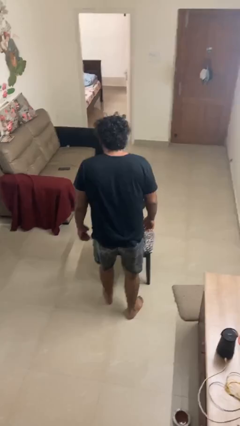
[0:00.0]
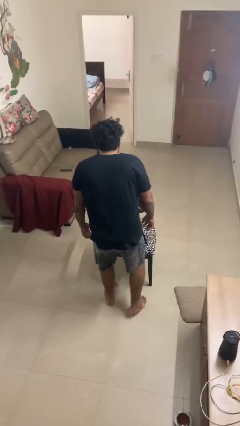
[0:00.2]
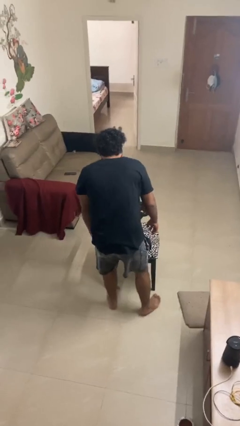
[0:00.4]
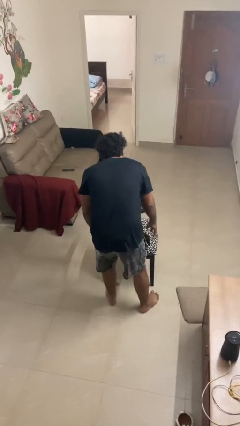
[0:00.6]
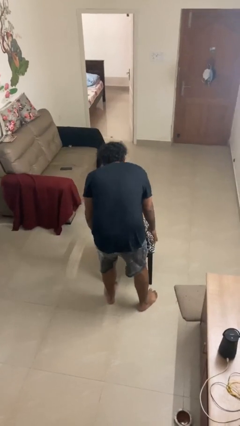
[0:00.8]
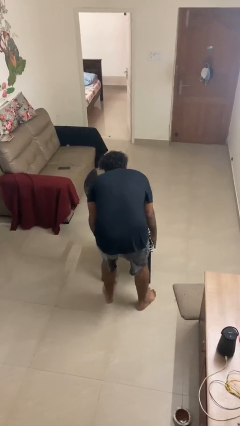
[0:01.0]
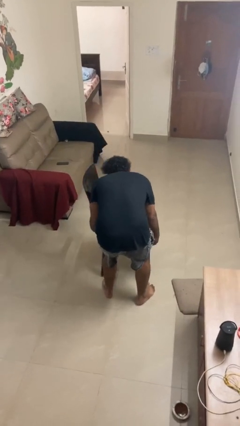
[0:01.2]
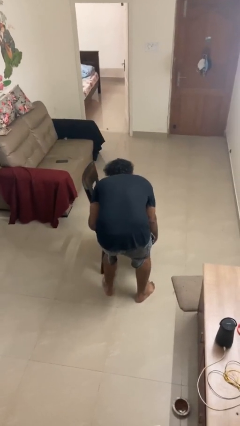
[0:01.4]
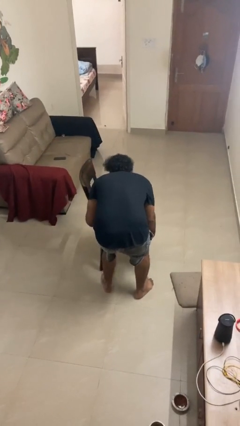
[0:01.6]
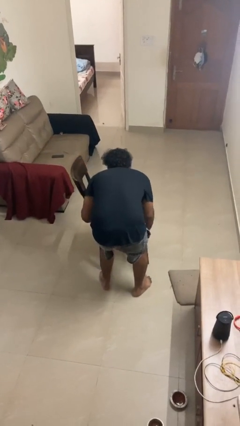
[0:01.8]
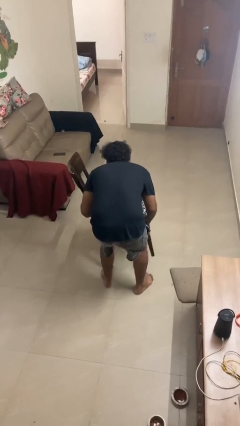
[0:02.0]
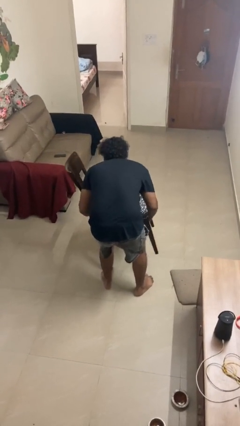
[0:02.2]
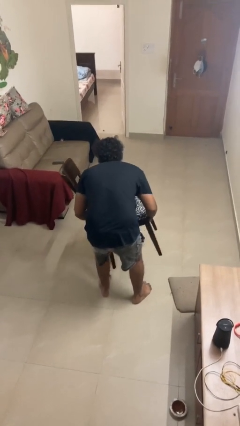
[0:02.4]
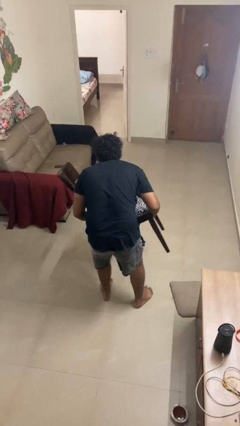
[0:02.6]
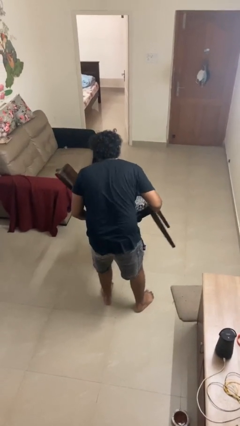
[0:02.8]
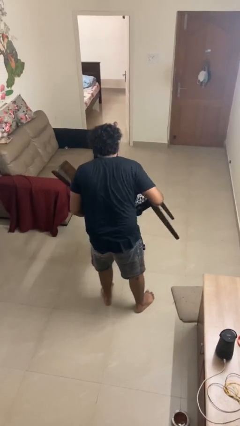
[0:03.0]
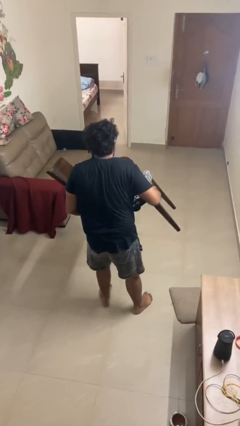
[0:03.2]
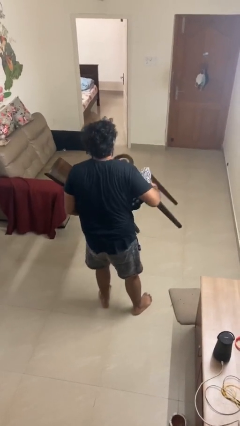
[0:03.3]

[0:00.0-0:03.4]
person picks up object from floor

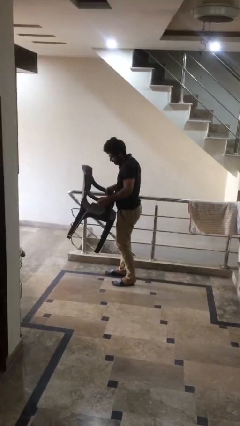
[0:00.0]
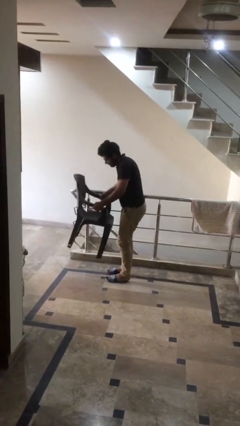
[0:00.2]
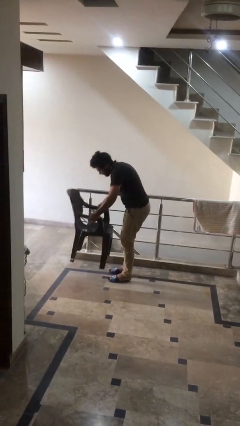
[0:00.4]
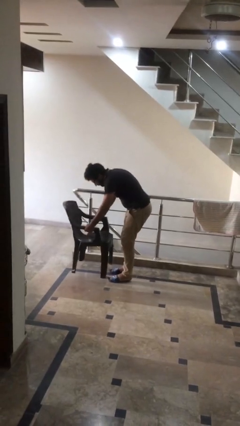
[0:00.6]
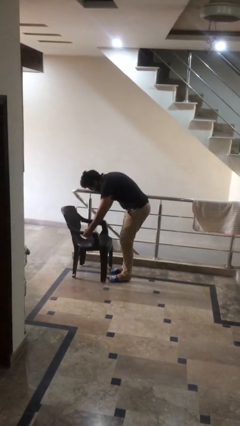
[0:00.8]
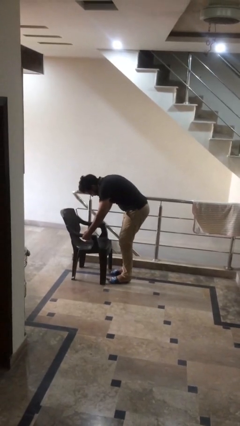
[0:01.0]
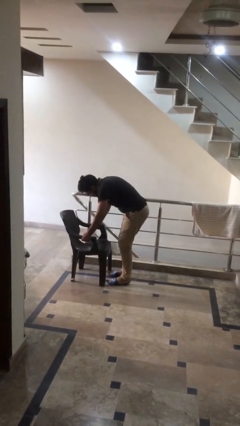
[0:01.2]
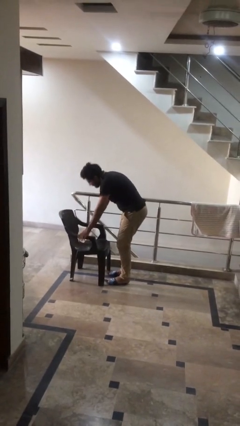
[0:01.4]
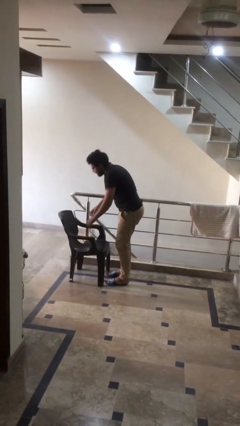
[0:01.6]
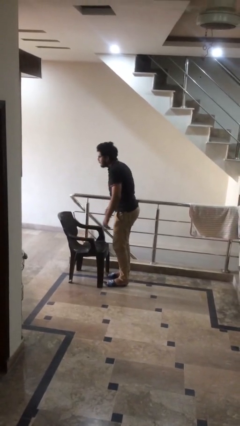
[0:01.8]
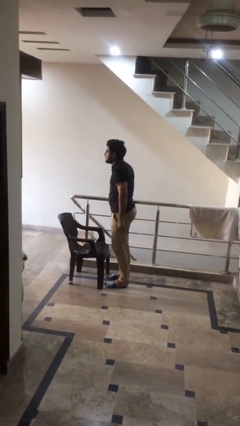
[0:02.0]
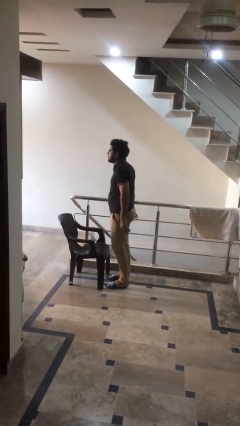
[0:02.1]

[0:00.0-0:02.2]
person puts down object on floor

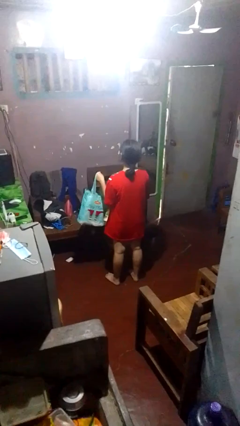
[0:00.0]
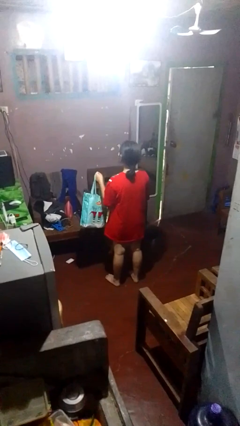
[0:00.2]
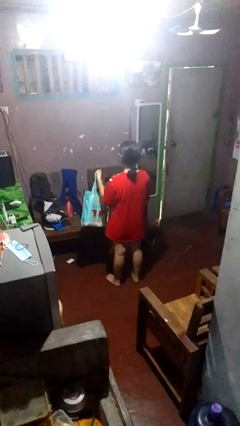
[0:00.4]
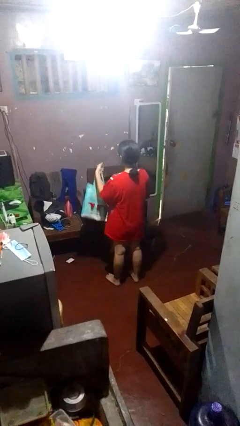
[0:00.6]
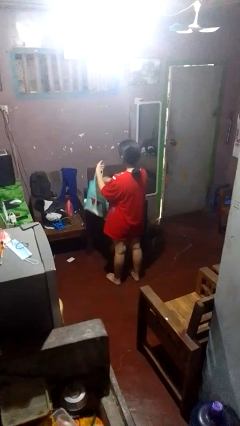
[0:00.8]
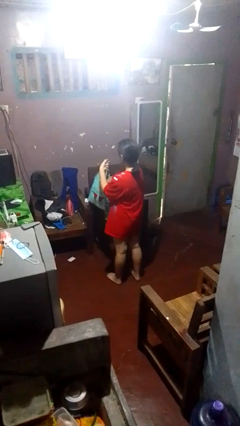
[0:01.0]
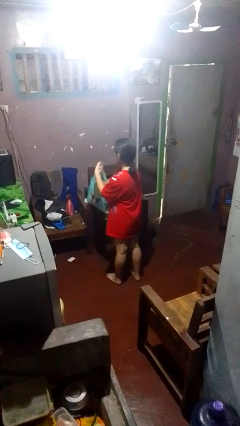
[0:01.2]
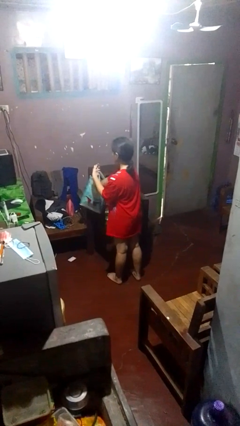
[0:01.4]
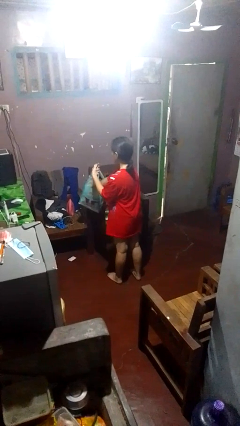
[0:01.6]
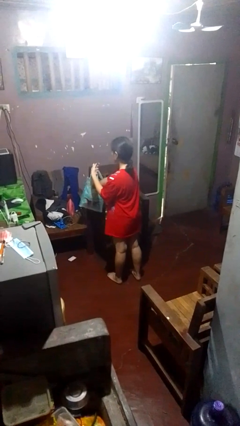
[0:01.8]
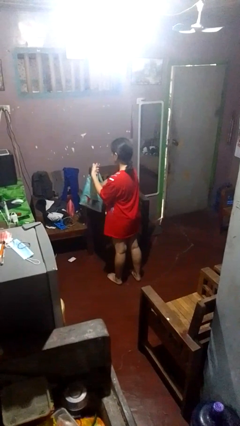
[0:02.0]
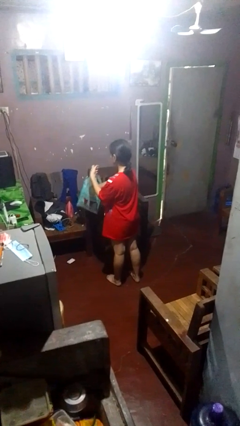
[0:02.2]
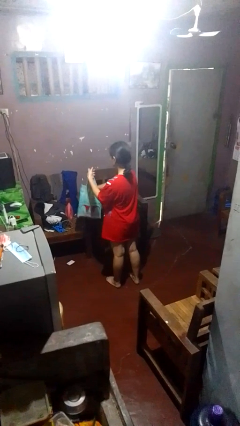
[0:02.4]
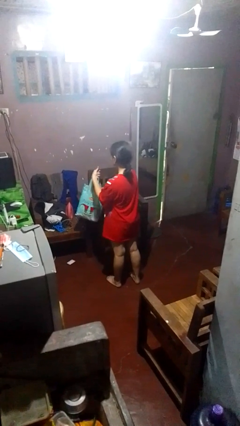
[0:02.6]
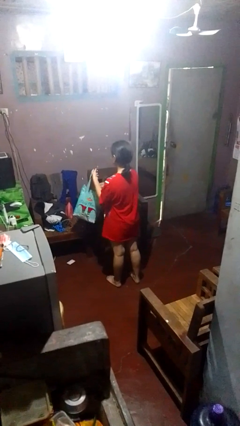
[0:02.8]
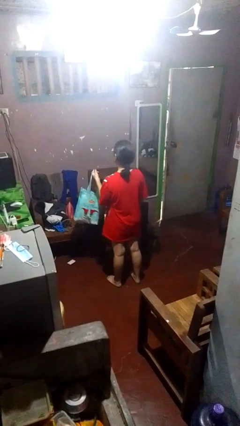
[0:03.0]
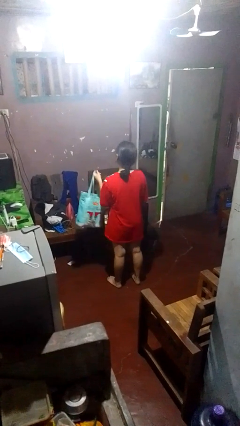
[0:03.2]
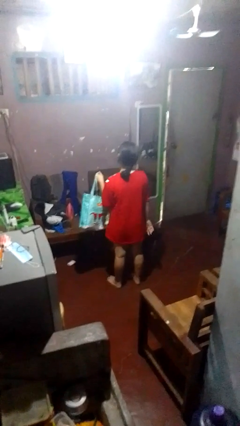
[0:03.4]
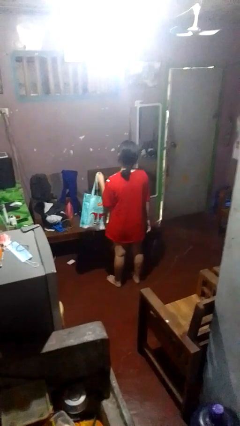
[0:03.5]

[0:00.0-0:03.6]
person searches in bag

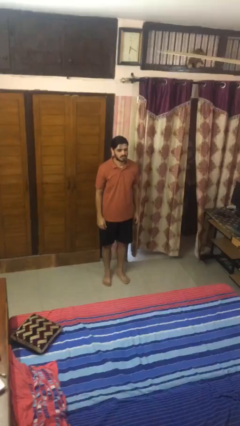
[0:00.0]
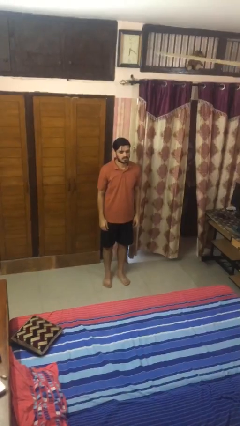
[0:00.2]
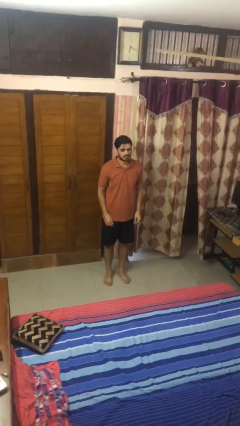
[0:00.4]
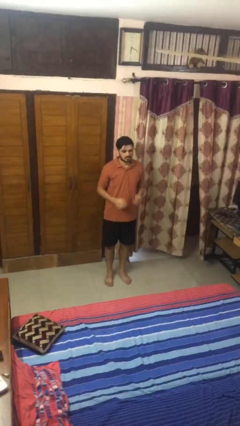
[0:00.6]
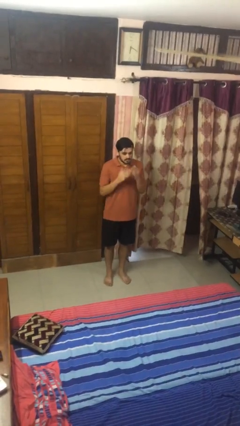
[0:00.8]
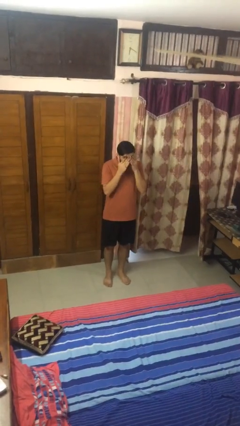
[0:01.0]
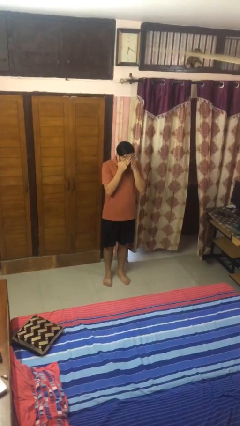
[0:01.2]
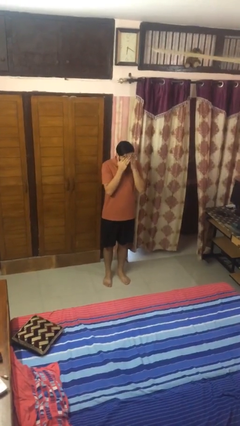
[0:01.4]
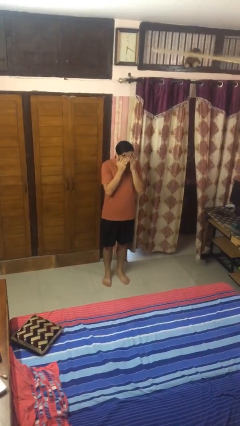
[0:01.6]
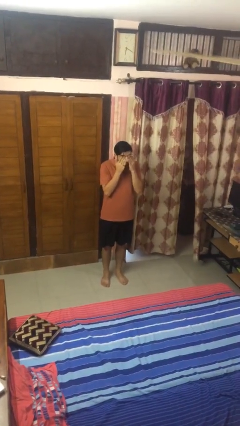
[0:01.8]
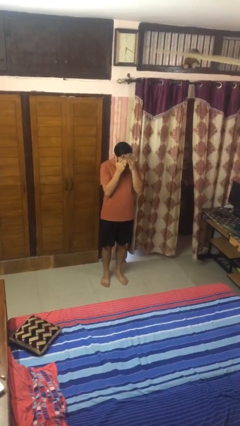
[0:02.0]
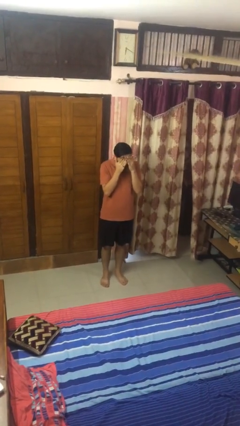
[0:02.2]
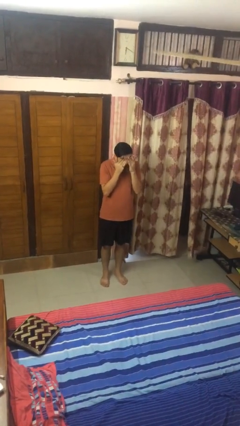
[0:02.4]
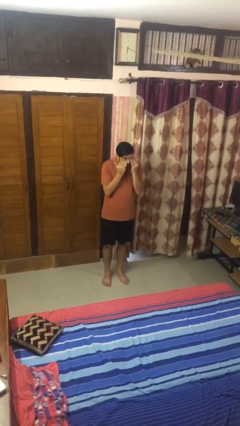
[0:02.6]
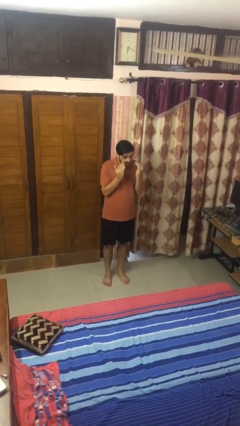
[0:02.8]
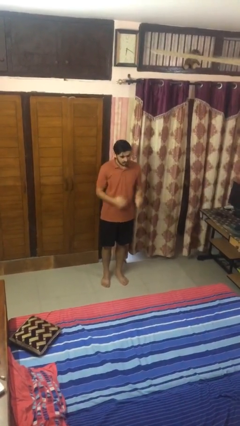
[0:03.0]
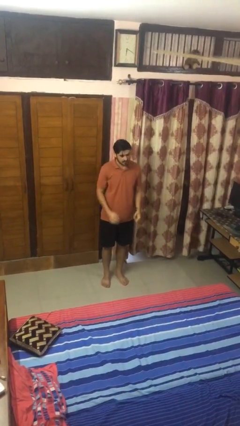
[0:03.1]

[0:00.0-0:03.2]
person rubs eyes

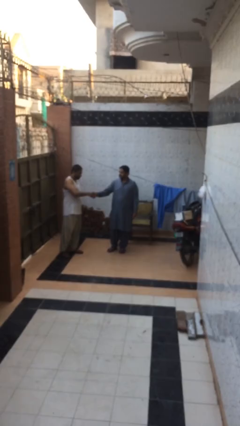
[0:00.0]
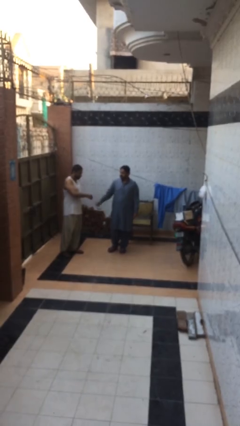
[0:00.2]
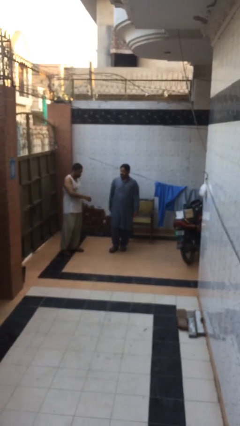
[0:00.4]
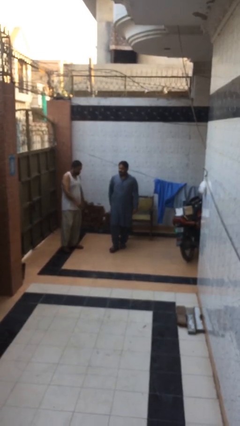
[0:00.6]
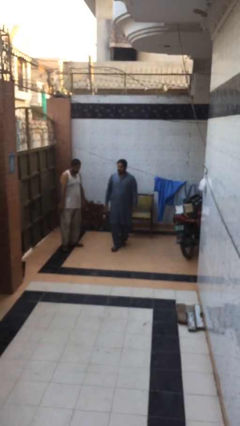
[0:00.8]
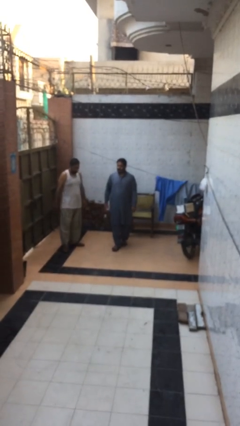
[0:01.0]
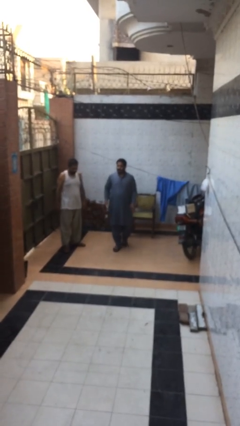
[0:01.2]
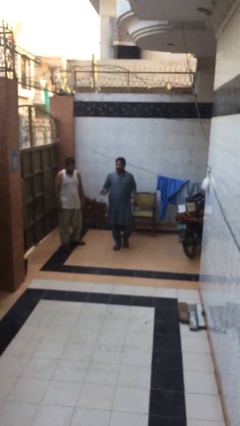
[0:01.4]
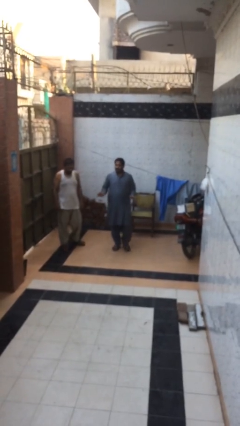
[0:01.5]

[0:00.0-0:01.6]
person talks to person

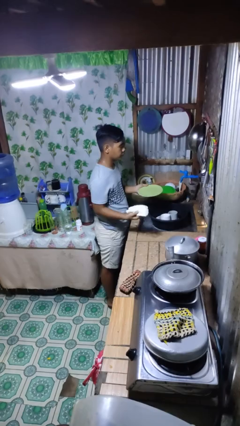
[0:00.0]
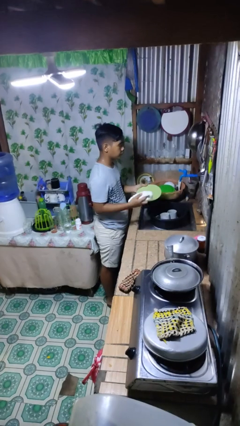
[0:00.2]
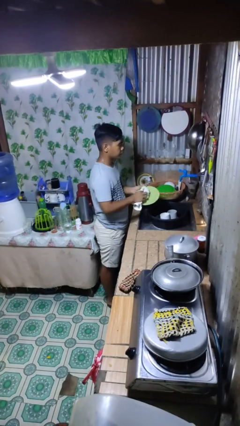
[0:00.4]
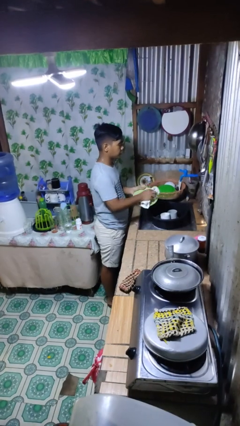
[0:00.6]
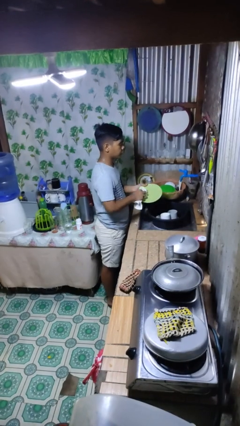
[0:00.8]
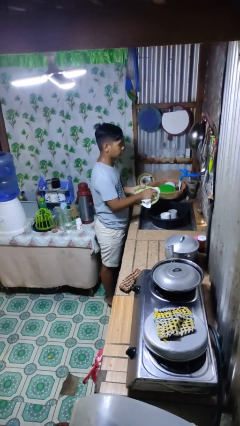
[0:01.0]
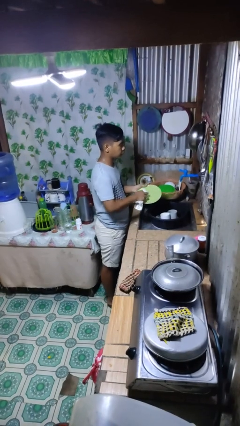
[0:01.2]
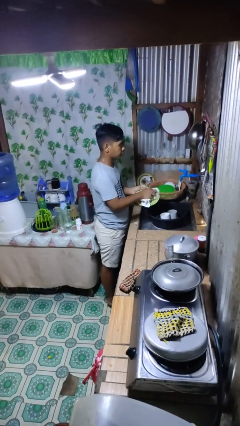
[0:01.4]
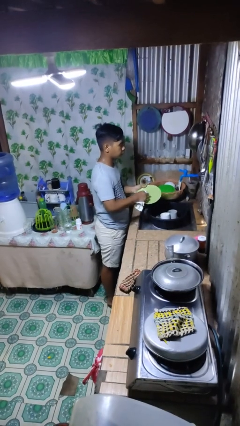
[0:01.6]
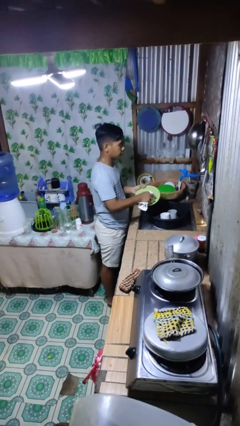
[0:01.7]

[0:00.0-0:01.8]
person dries dish

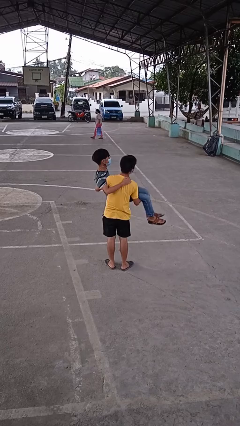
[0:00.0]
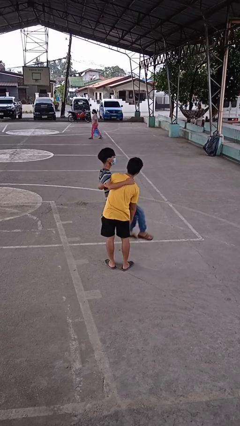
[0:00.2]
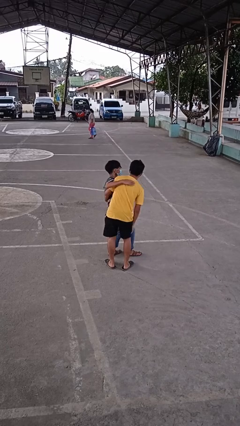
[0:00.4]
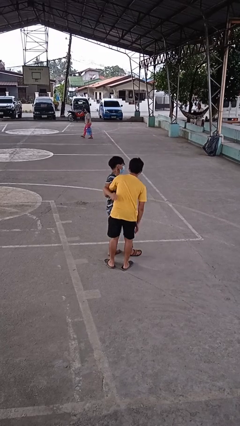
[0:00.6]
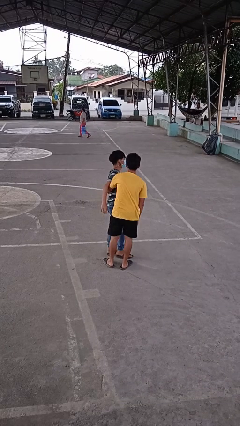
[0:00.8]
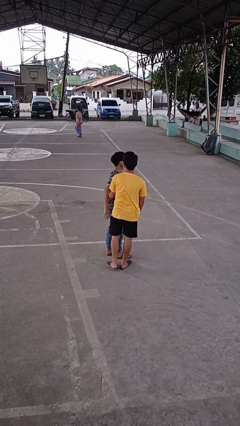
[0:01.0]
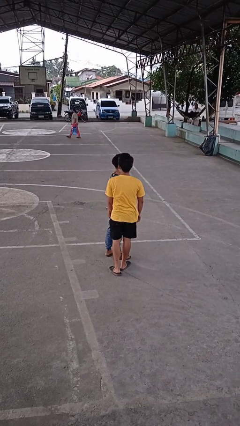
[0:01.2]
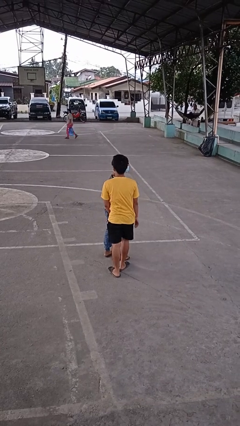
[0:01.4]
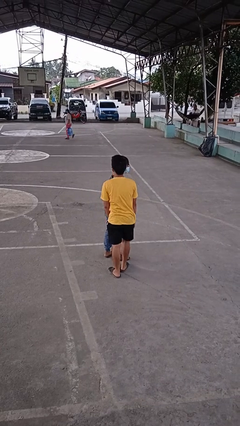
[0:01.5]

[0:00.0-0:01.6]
person puts down person
